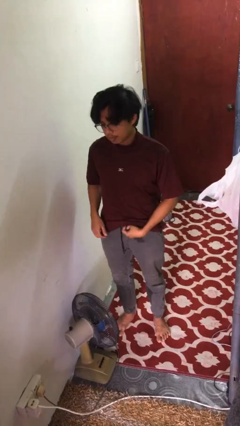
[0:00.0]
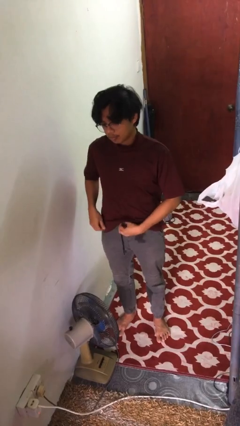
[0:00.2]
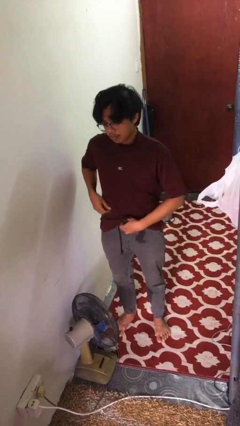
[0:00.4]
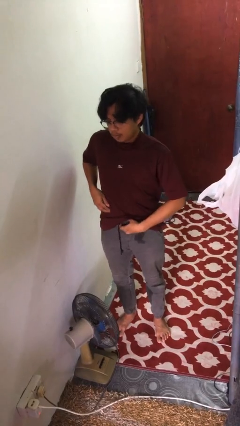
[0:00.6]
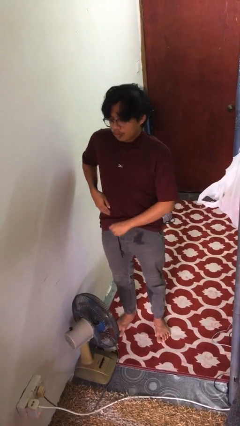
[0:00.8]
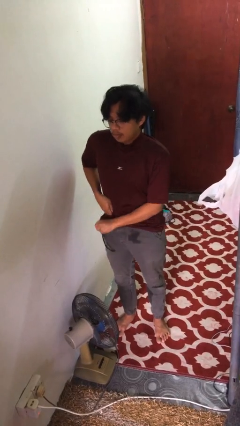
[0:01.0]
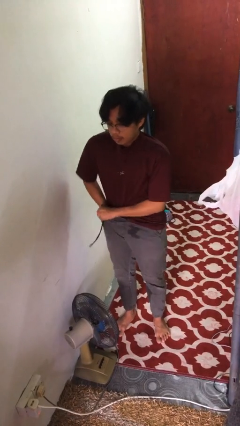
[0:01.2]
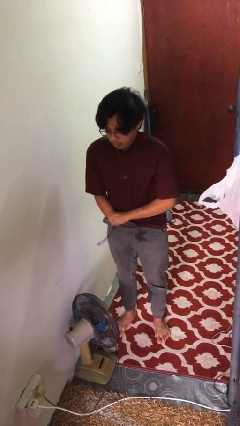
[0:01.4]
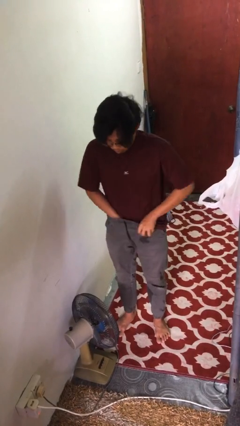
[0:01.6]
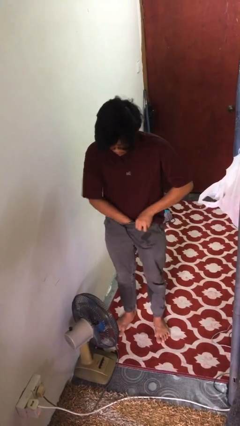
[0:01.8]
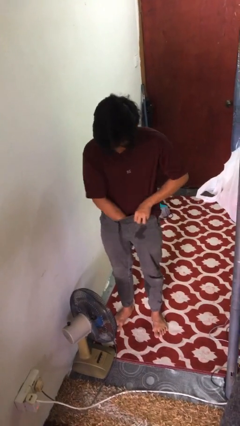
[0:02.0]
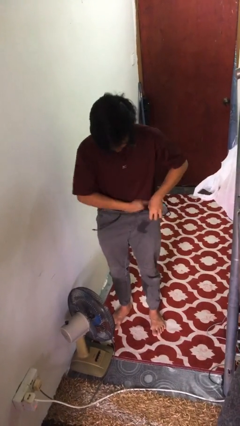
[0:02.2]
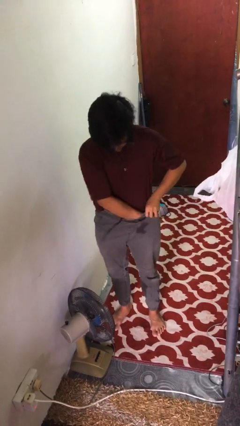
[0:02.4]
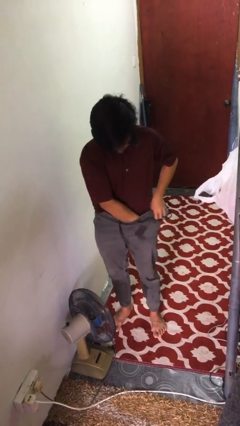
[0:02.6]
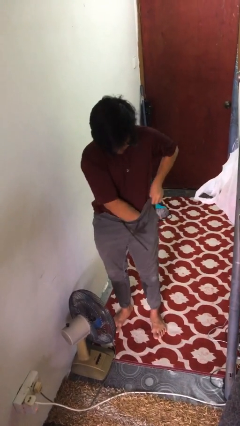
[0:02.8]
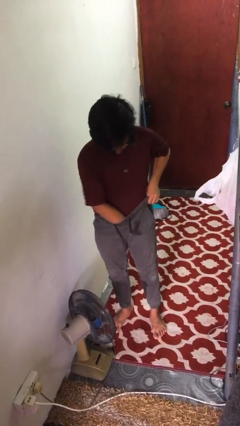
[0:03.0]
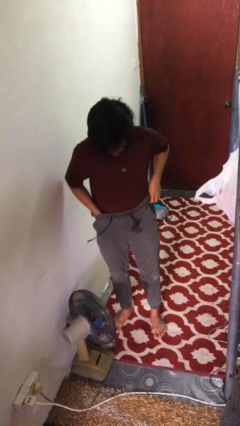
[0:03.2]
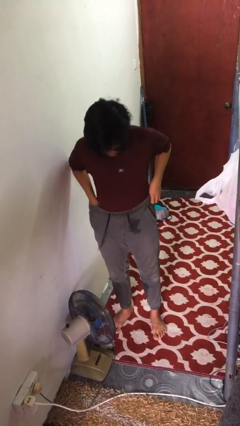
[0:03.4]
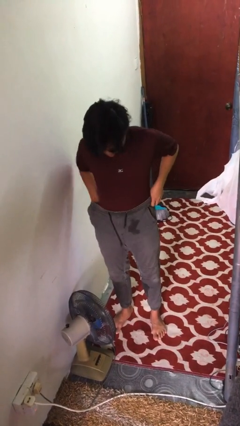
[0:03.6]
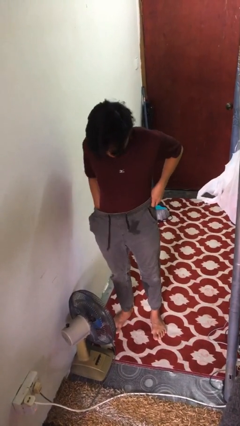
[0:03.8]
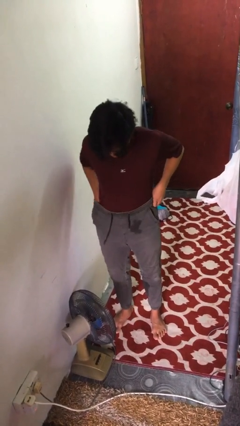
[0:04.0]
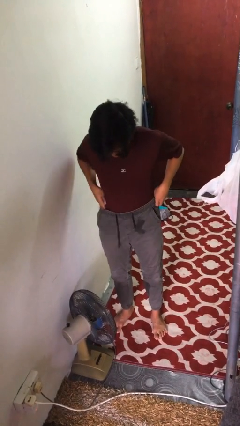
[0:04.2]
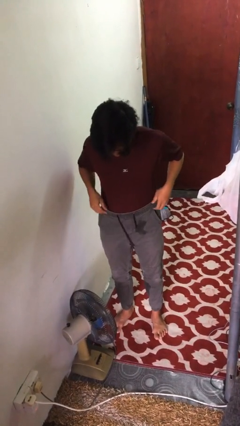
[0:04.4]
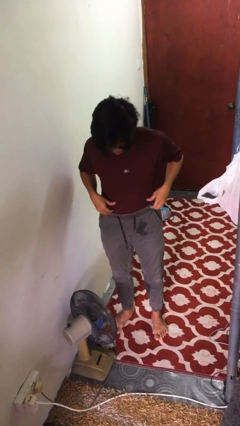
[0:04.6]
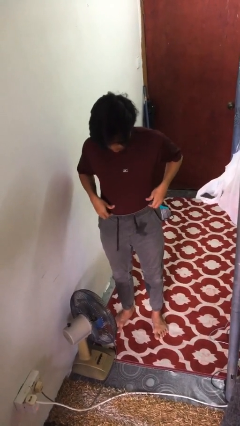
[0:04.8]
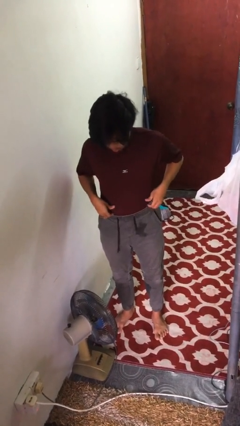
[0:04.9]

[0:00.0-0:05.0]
person tucks in shirt

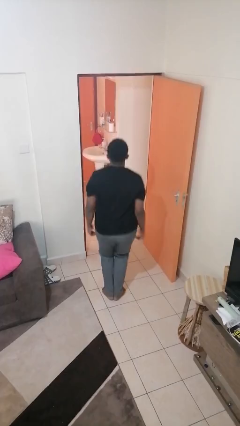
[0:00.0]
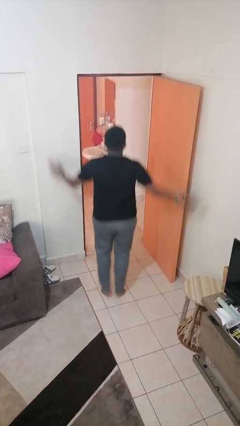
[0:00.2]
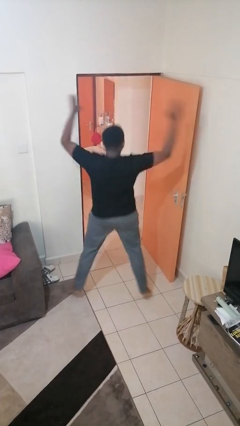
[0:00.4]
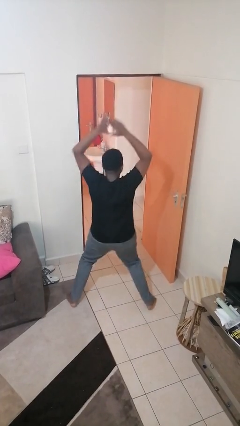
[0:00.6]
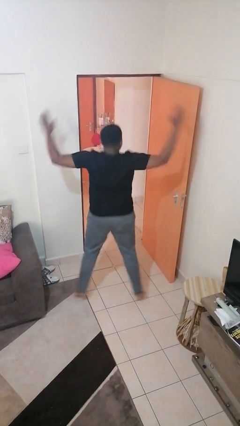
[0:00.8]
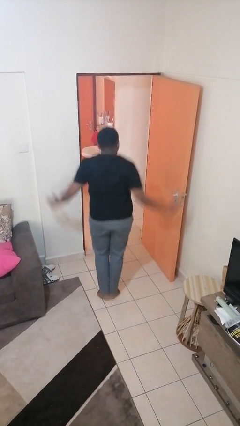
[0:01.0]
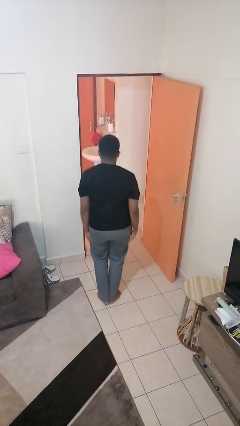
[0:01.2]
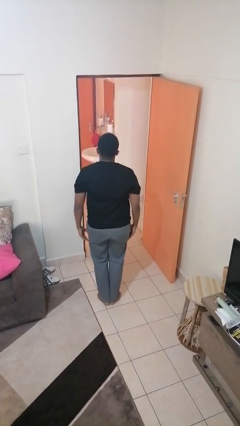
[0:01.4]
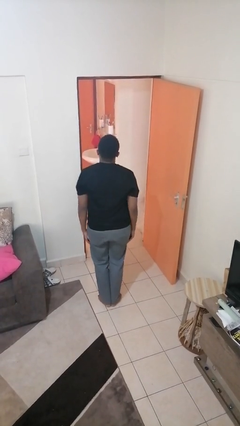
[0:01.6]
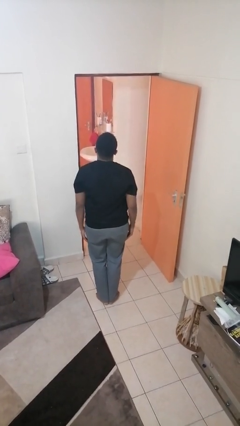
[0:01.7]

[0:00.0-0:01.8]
person exercises with jumping jacks

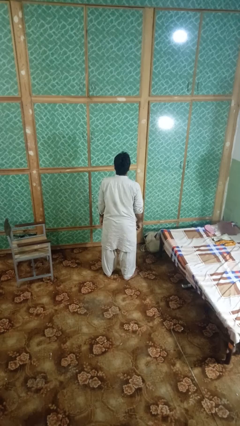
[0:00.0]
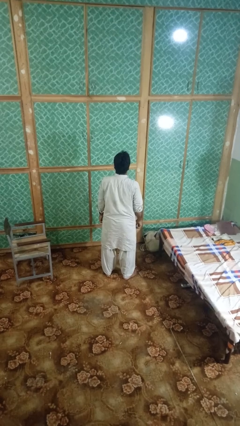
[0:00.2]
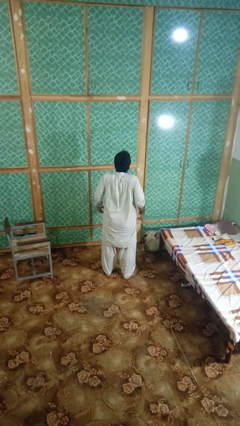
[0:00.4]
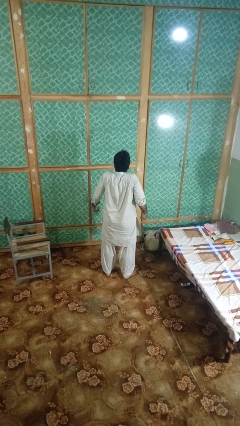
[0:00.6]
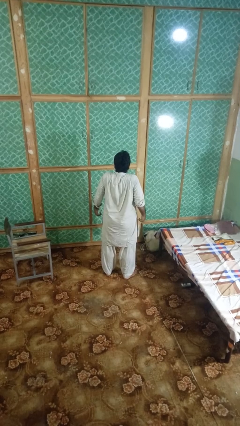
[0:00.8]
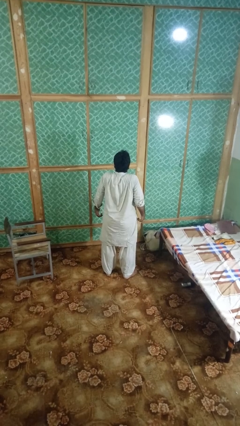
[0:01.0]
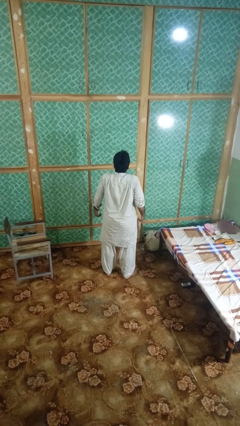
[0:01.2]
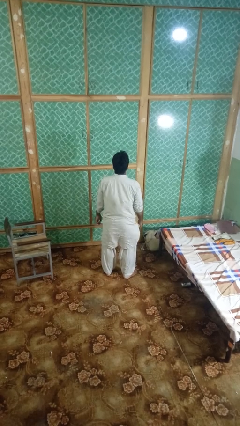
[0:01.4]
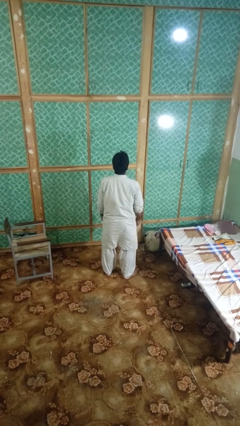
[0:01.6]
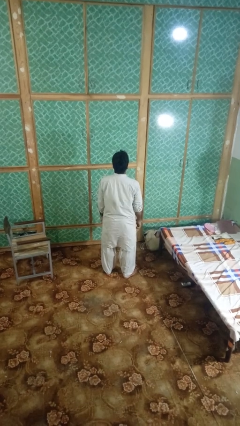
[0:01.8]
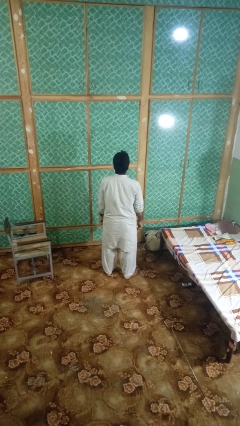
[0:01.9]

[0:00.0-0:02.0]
person shrugs

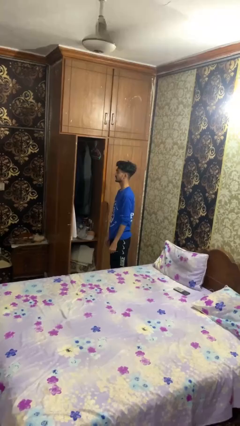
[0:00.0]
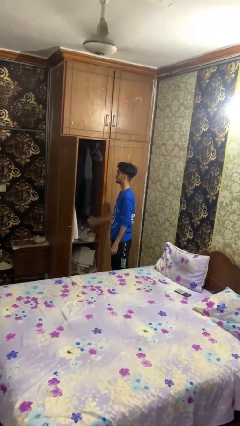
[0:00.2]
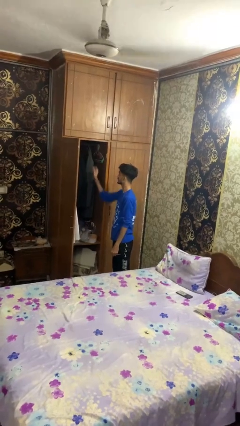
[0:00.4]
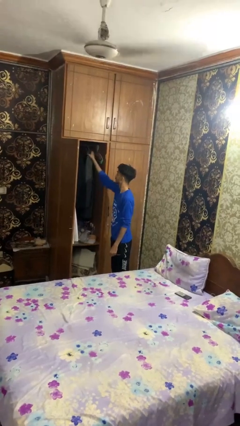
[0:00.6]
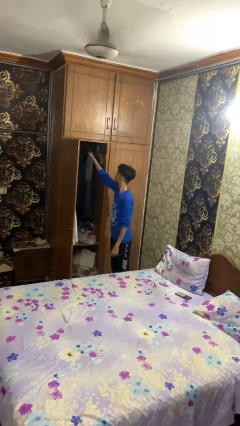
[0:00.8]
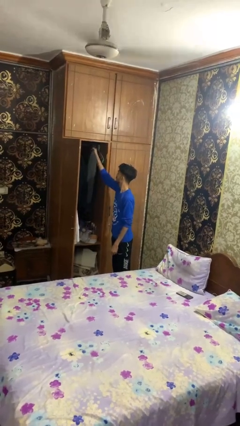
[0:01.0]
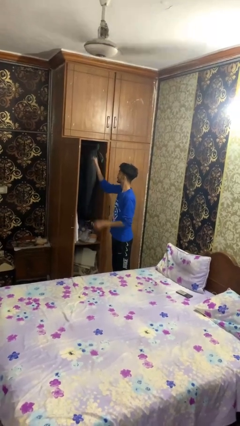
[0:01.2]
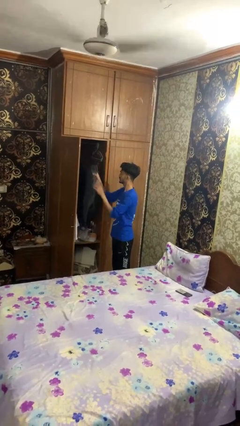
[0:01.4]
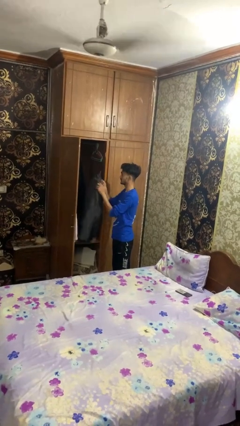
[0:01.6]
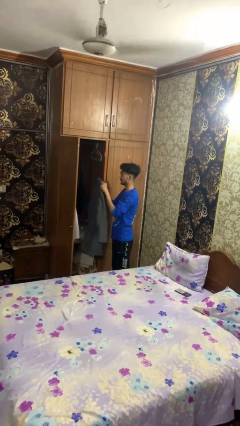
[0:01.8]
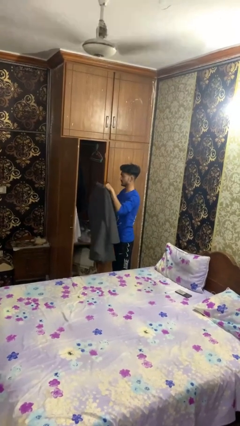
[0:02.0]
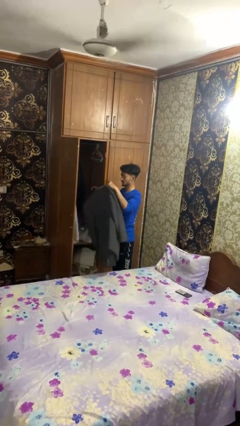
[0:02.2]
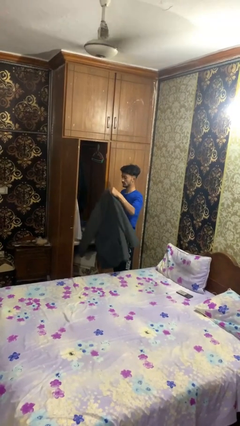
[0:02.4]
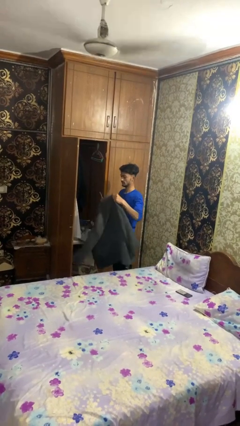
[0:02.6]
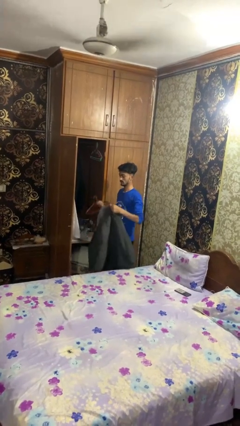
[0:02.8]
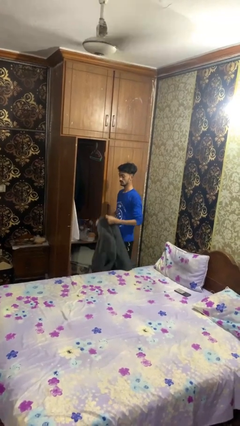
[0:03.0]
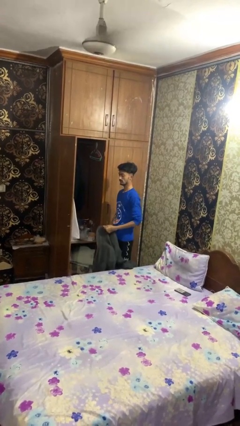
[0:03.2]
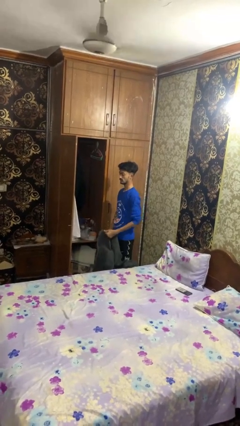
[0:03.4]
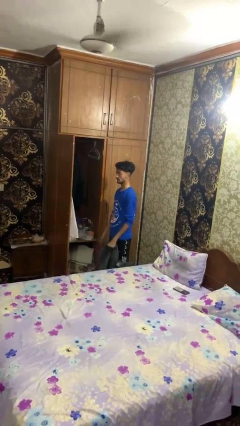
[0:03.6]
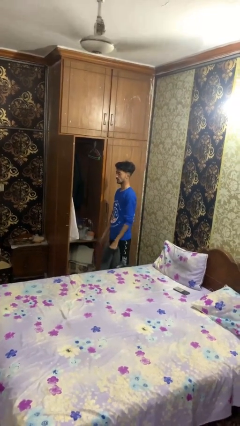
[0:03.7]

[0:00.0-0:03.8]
person takes clothes from closet

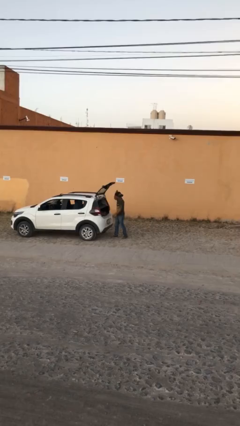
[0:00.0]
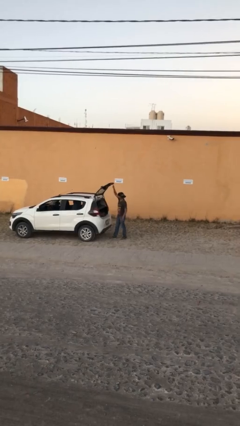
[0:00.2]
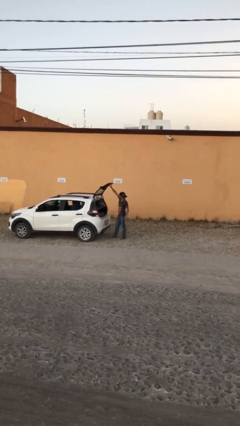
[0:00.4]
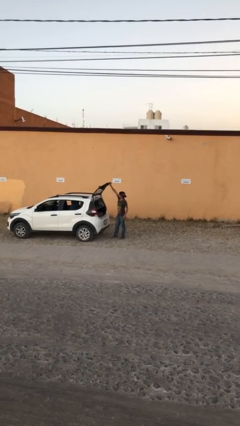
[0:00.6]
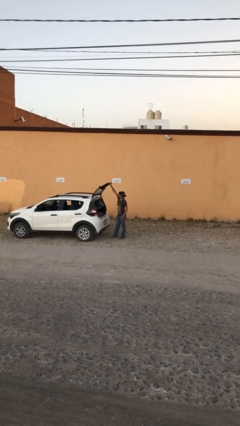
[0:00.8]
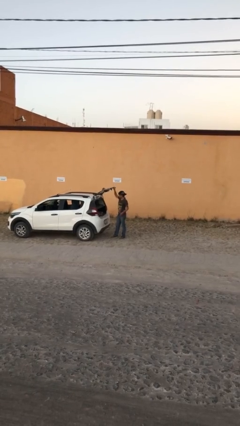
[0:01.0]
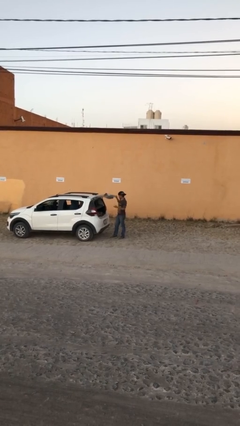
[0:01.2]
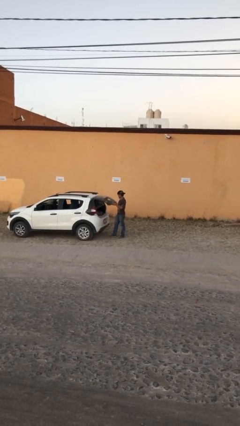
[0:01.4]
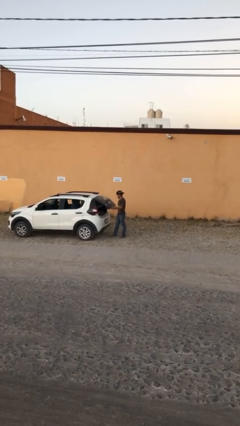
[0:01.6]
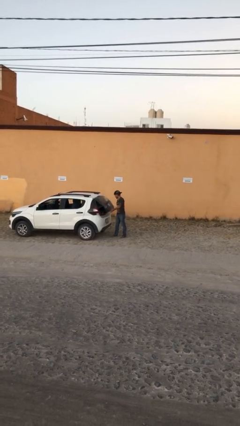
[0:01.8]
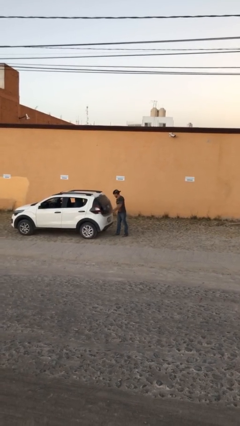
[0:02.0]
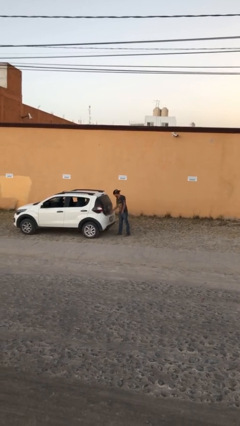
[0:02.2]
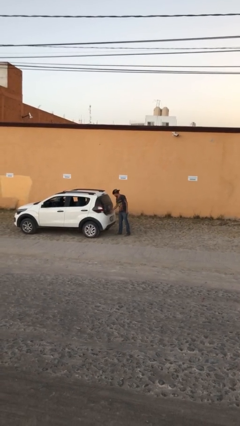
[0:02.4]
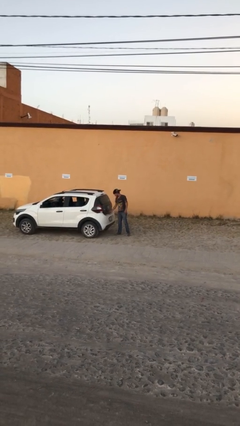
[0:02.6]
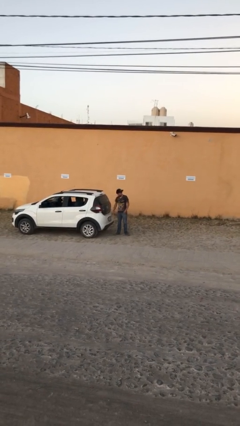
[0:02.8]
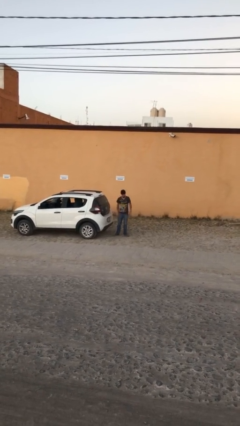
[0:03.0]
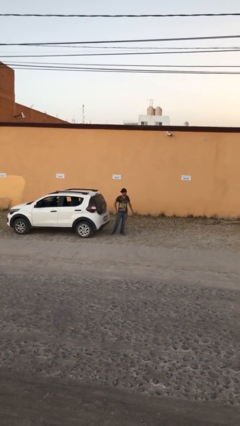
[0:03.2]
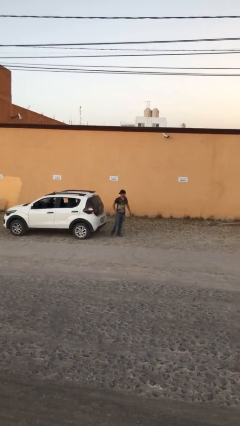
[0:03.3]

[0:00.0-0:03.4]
person closes car trunk

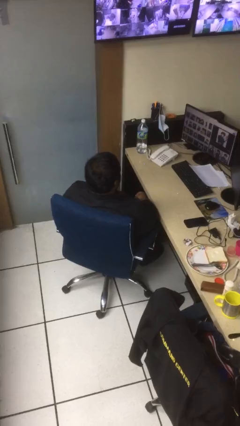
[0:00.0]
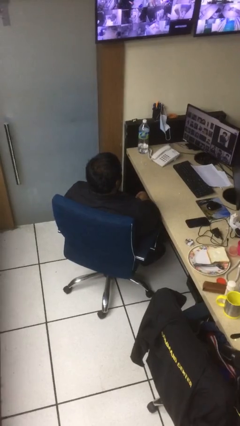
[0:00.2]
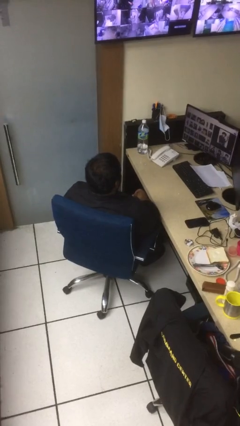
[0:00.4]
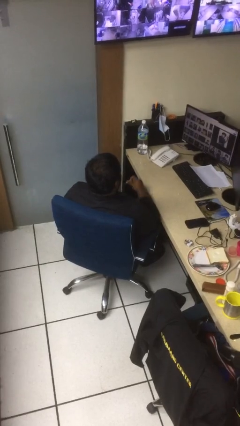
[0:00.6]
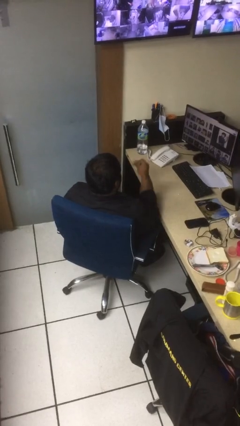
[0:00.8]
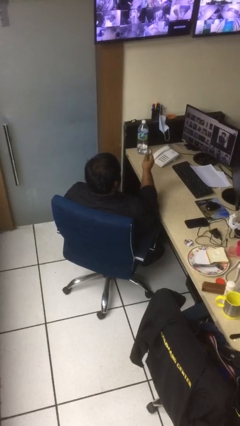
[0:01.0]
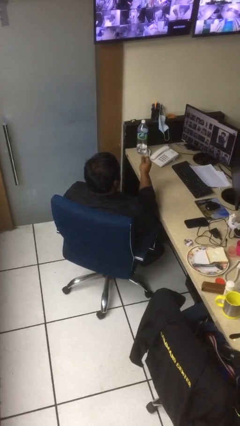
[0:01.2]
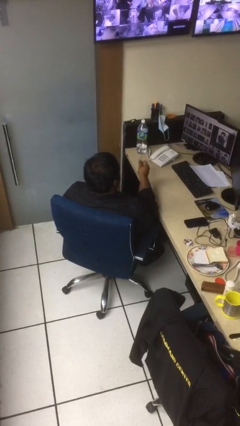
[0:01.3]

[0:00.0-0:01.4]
person snaps fingers
